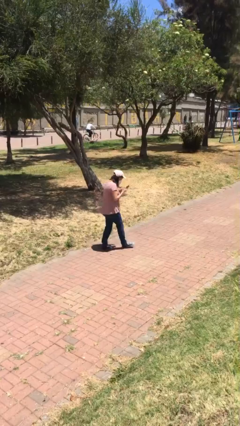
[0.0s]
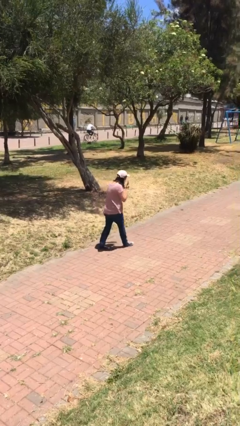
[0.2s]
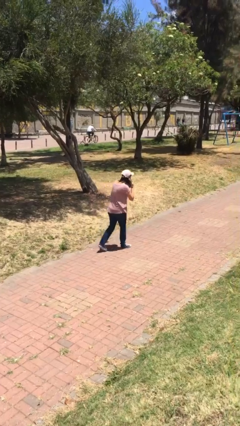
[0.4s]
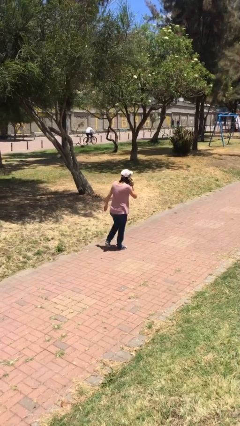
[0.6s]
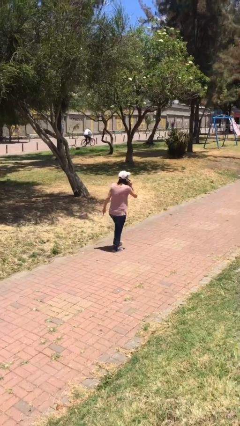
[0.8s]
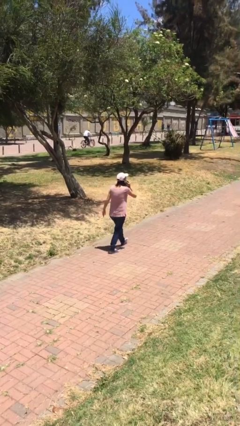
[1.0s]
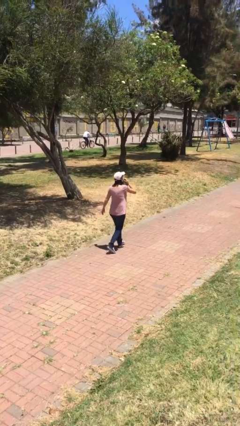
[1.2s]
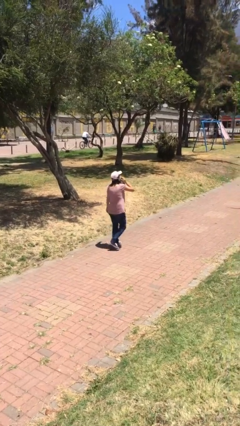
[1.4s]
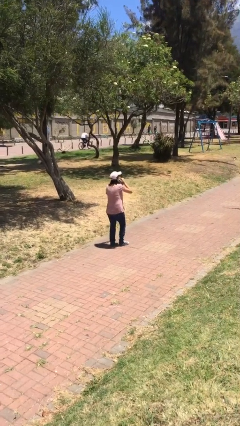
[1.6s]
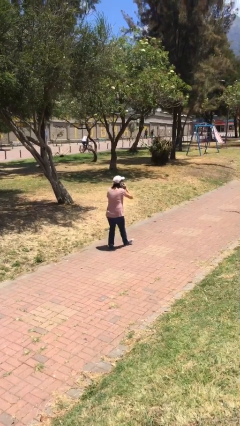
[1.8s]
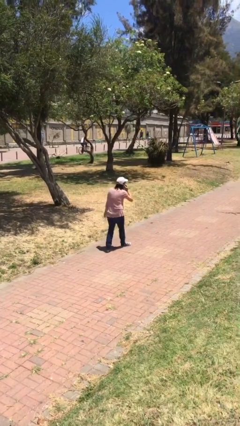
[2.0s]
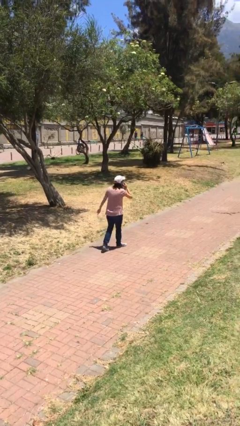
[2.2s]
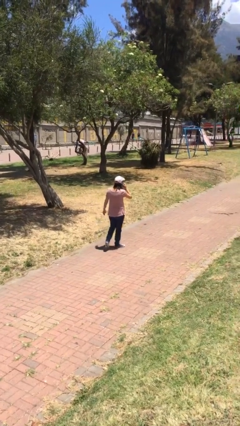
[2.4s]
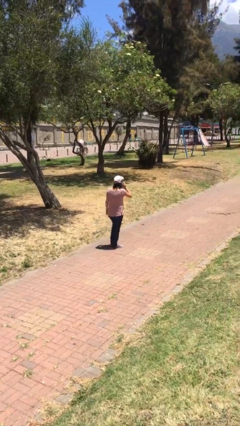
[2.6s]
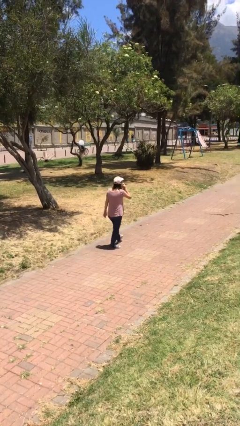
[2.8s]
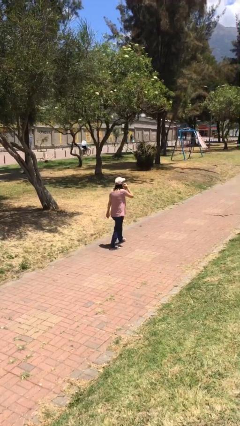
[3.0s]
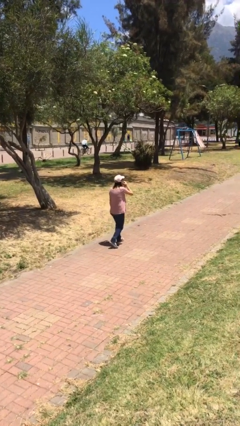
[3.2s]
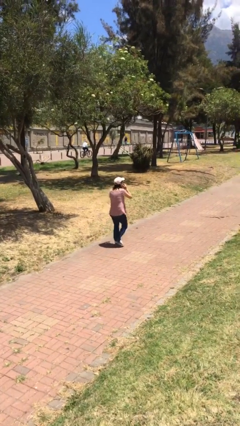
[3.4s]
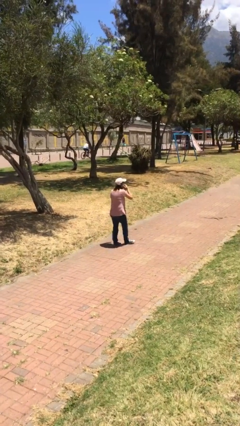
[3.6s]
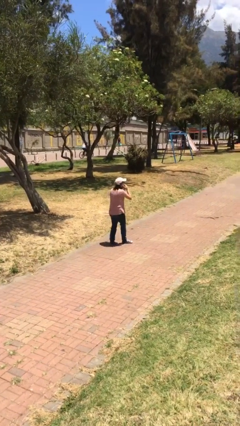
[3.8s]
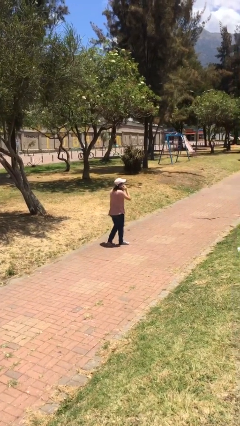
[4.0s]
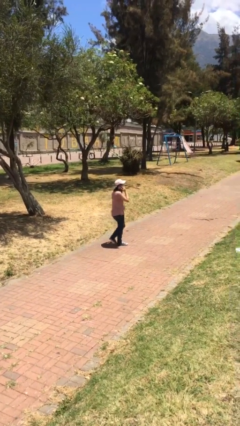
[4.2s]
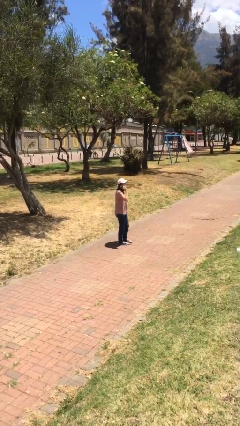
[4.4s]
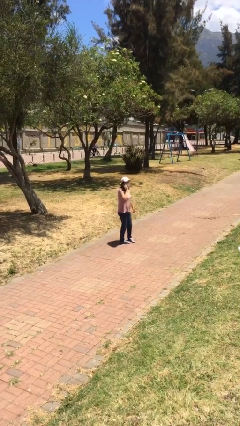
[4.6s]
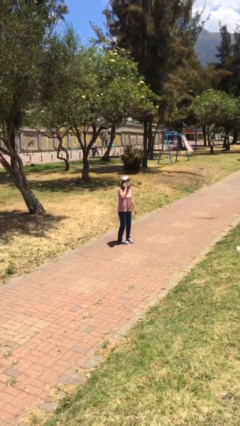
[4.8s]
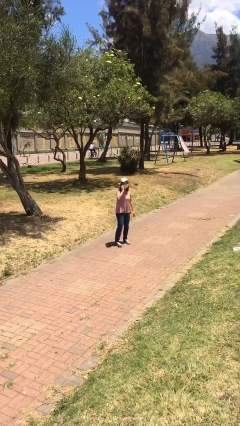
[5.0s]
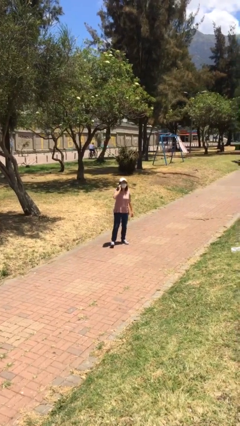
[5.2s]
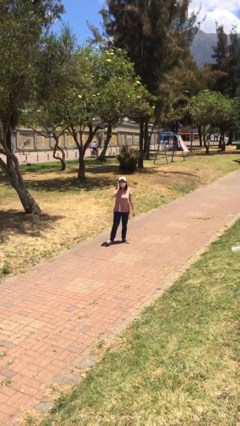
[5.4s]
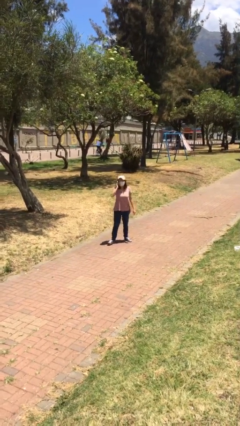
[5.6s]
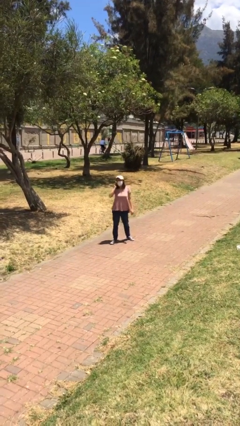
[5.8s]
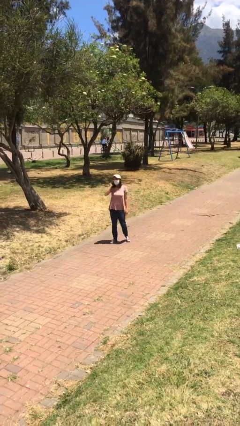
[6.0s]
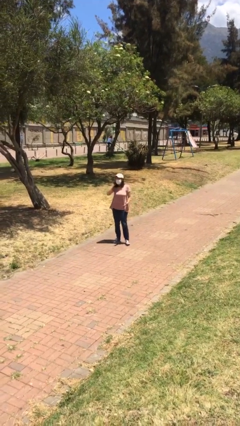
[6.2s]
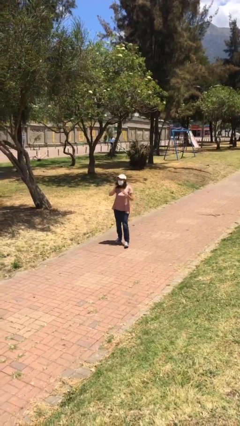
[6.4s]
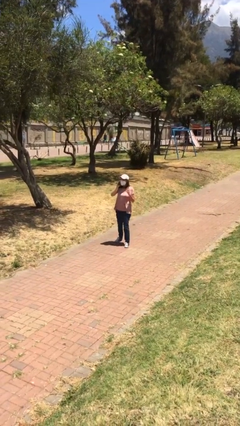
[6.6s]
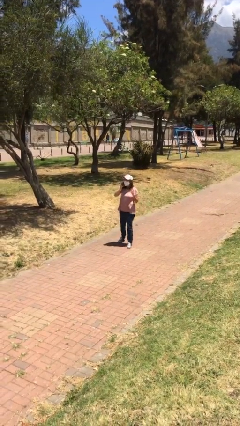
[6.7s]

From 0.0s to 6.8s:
person talks on phone

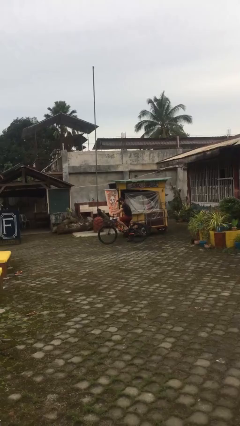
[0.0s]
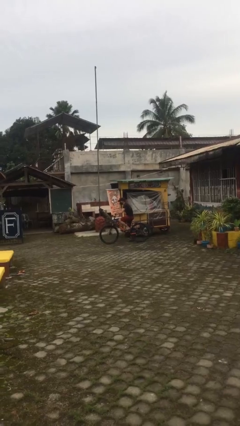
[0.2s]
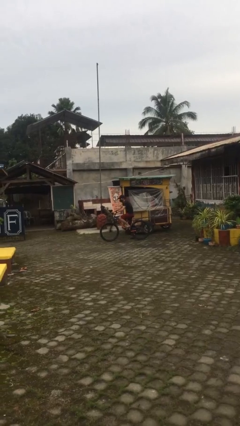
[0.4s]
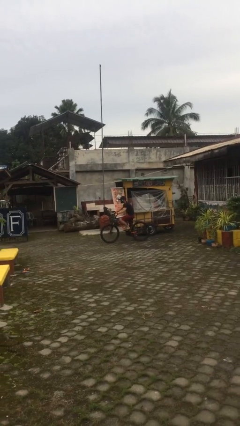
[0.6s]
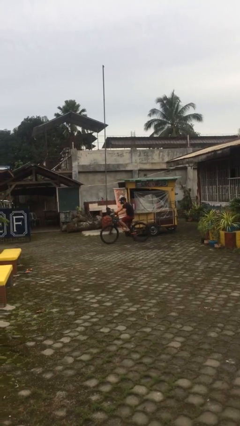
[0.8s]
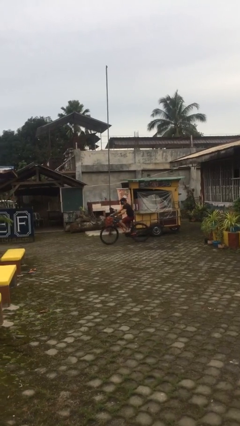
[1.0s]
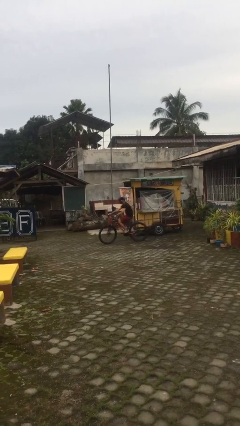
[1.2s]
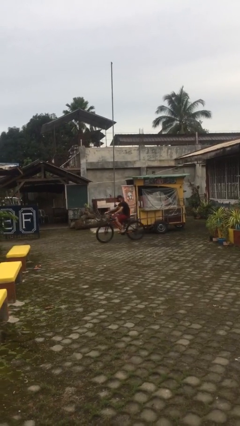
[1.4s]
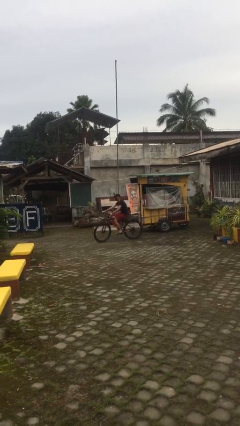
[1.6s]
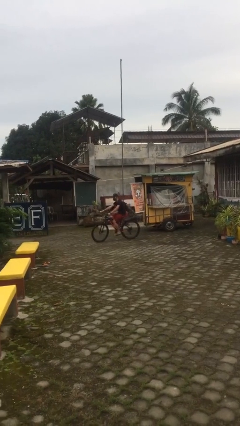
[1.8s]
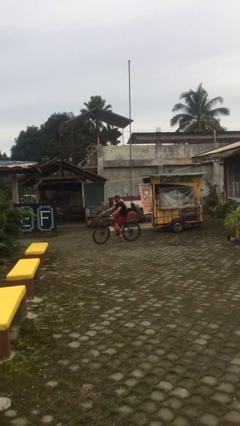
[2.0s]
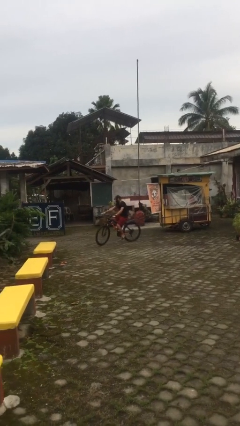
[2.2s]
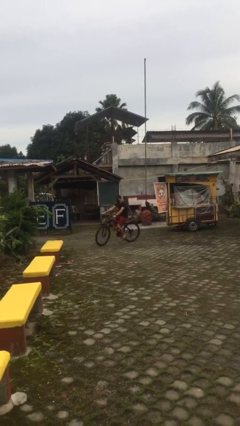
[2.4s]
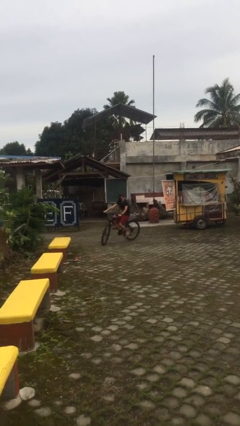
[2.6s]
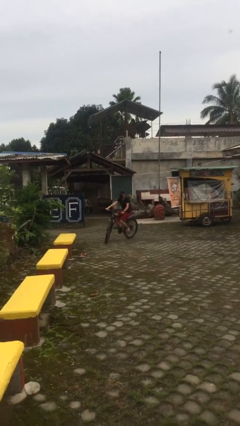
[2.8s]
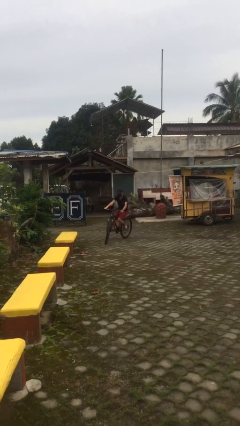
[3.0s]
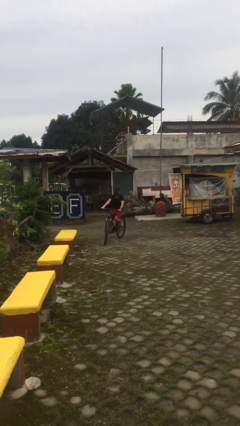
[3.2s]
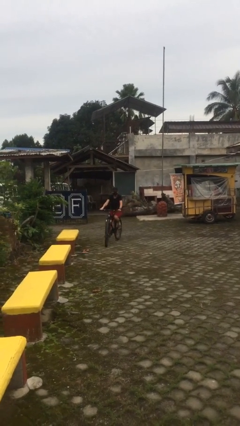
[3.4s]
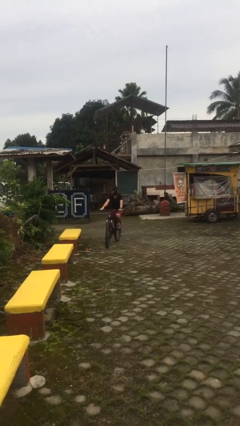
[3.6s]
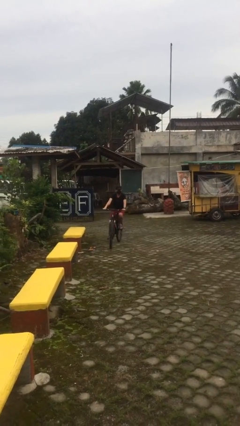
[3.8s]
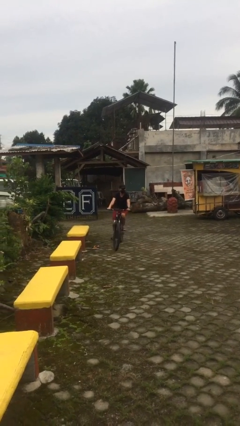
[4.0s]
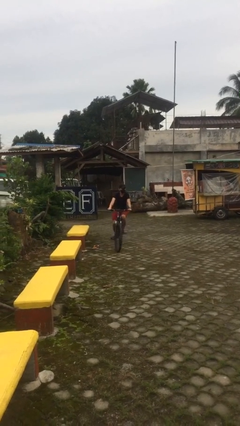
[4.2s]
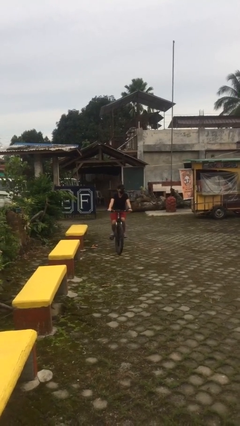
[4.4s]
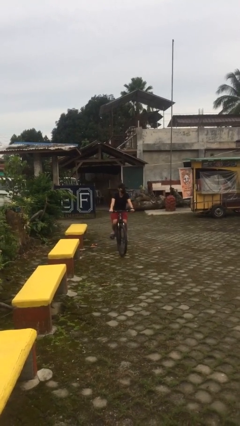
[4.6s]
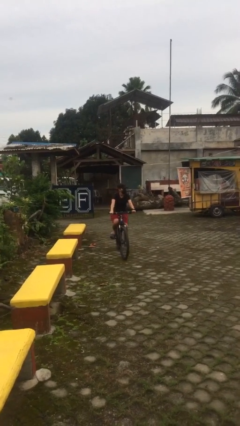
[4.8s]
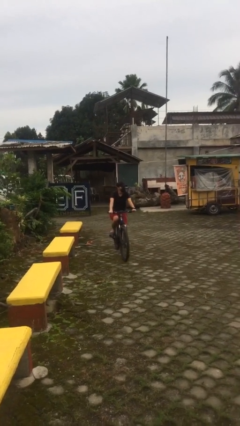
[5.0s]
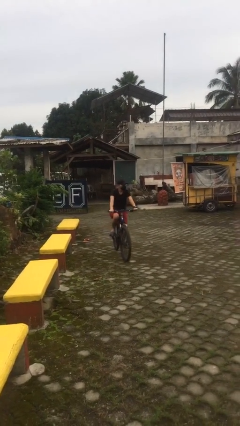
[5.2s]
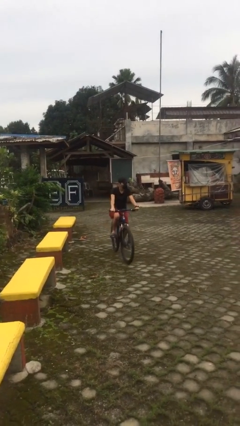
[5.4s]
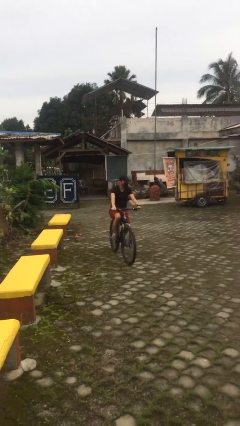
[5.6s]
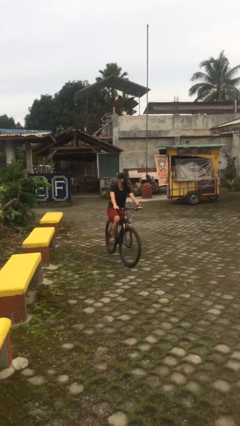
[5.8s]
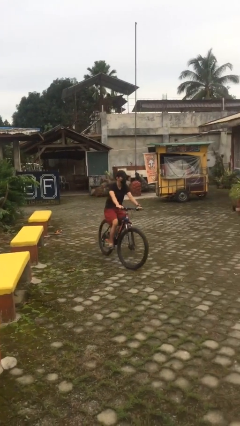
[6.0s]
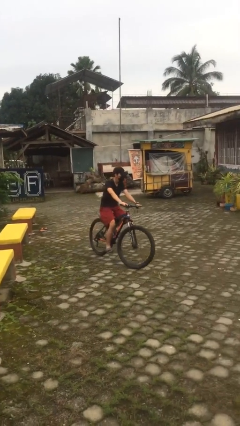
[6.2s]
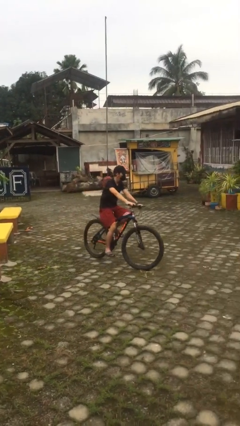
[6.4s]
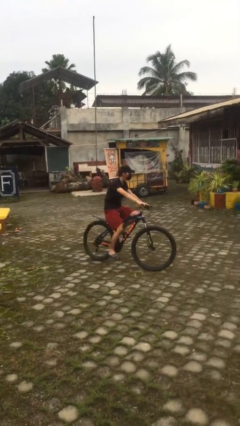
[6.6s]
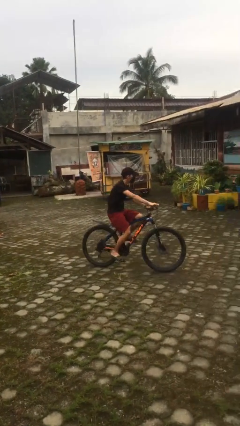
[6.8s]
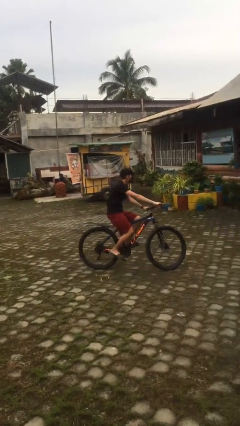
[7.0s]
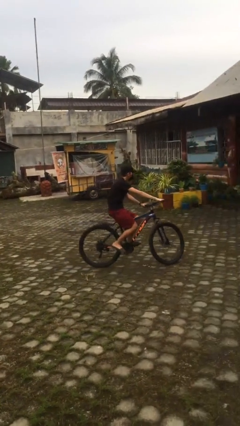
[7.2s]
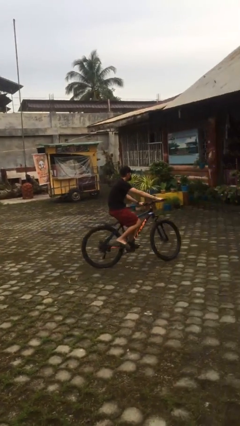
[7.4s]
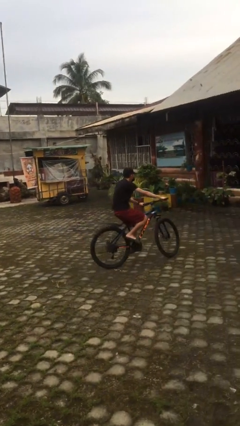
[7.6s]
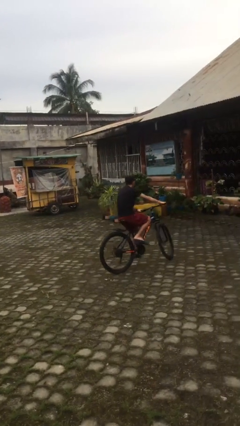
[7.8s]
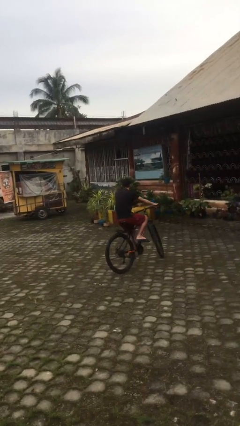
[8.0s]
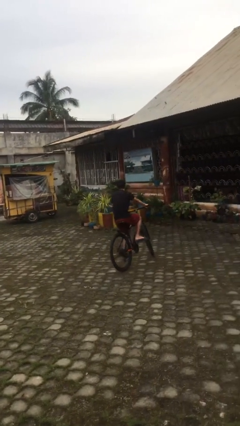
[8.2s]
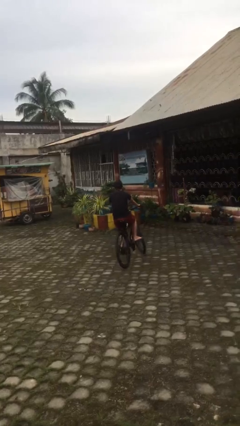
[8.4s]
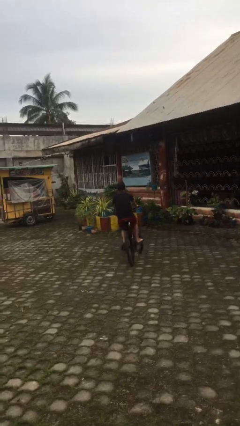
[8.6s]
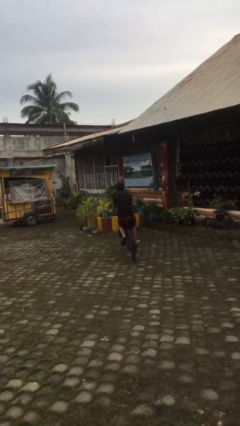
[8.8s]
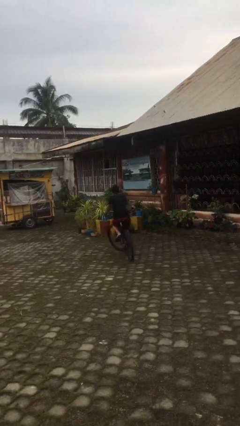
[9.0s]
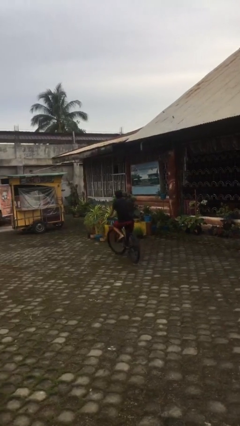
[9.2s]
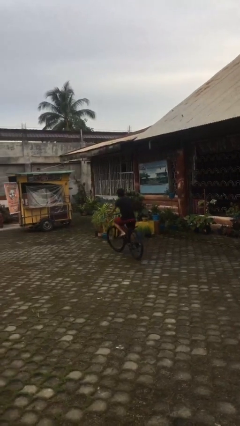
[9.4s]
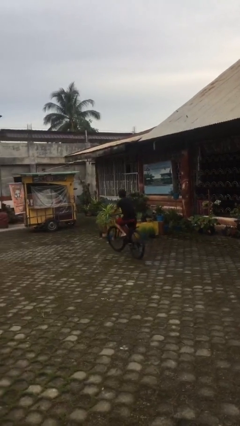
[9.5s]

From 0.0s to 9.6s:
person rides bicycle

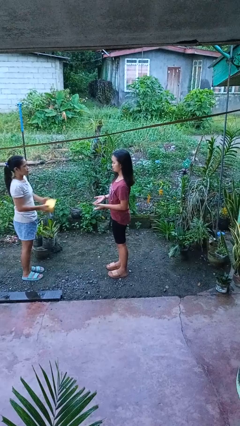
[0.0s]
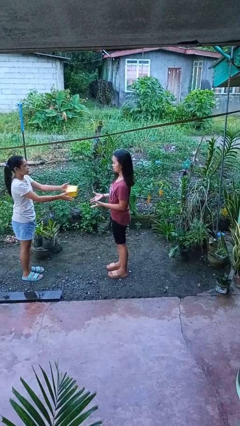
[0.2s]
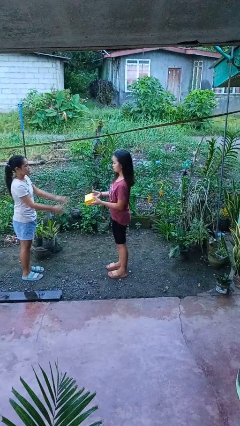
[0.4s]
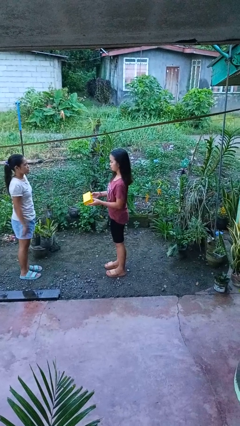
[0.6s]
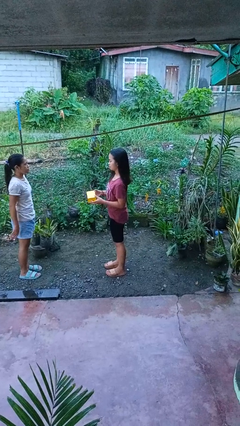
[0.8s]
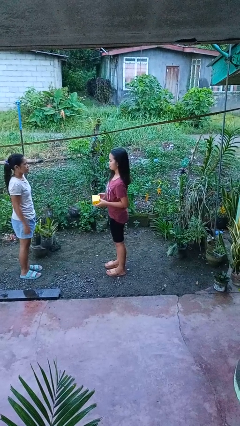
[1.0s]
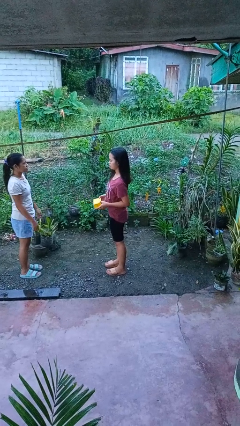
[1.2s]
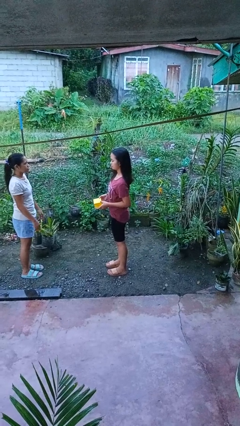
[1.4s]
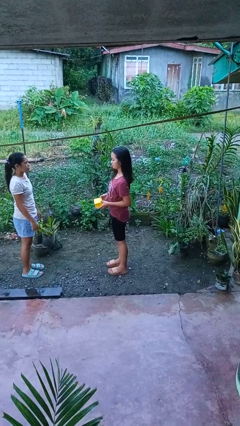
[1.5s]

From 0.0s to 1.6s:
person catches object from person

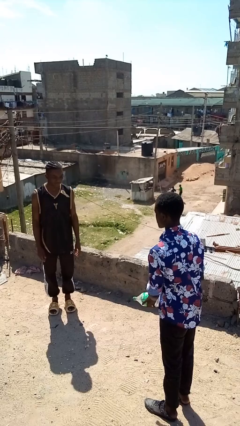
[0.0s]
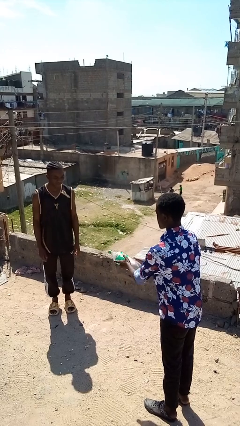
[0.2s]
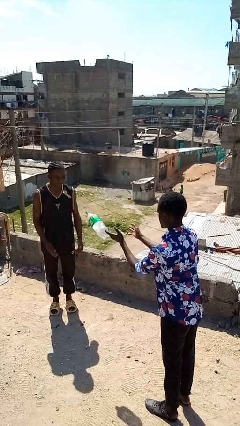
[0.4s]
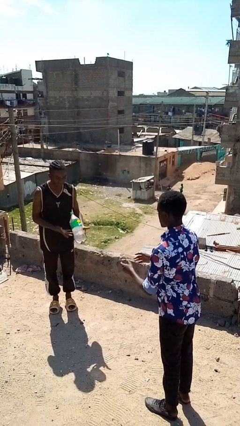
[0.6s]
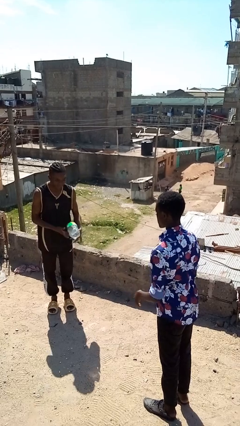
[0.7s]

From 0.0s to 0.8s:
person throws object to person
